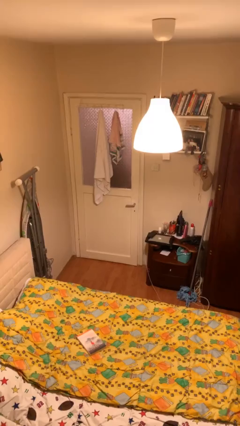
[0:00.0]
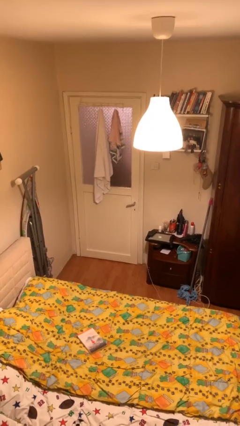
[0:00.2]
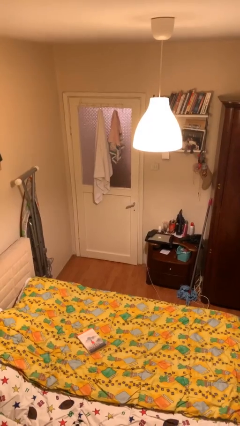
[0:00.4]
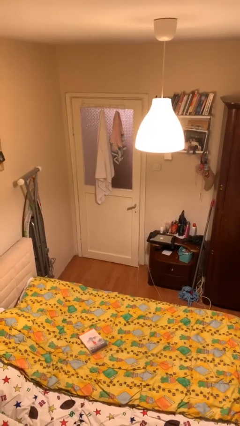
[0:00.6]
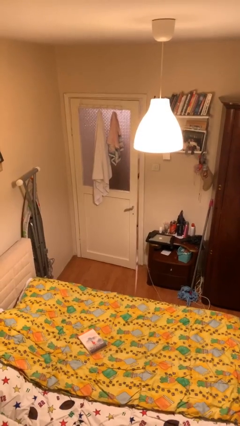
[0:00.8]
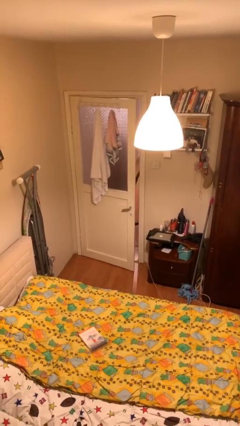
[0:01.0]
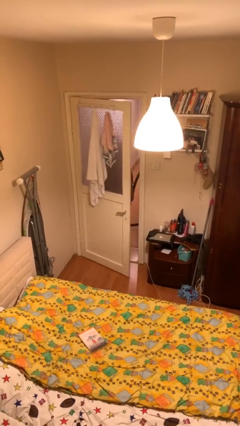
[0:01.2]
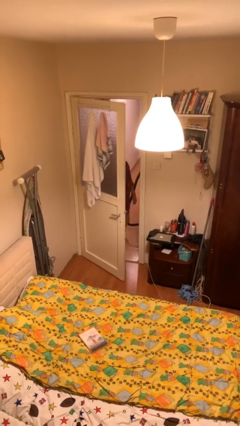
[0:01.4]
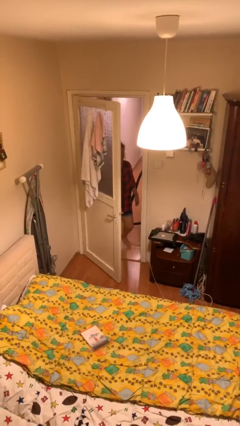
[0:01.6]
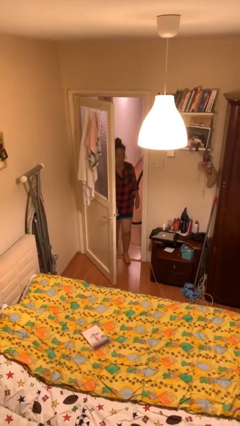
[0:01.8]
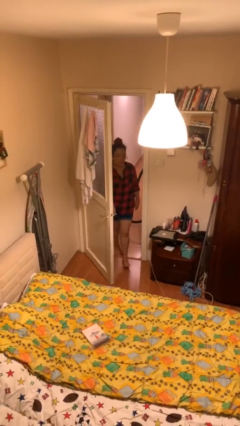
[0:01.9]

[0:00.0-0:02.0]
person opens facility door

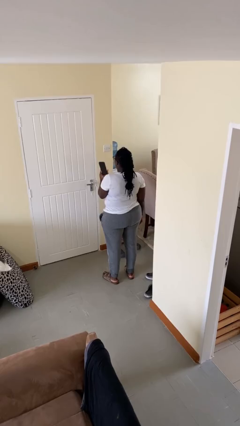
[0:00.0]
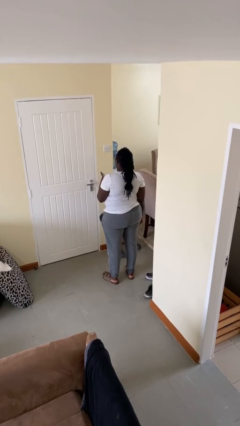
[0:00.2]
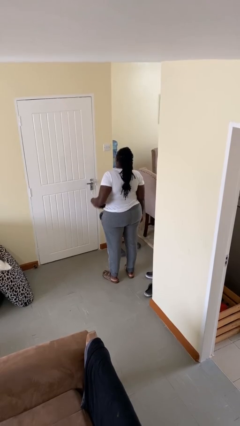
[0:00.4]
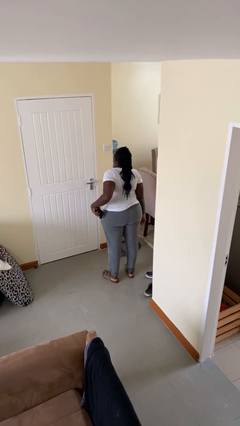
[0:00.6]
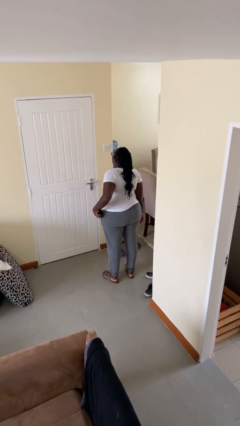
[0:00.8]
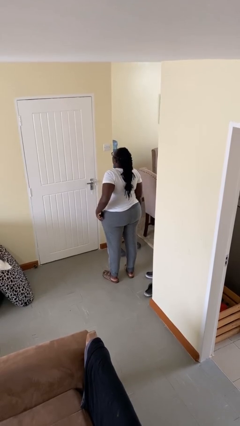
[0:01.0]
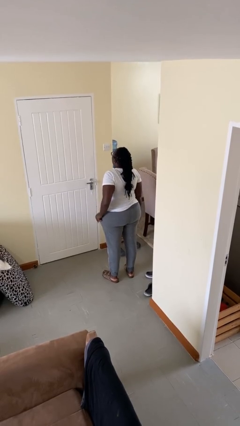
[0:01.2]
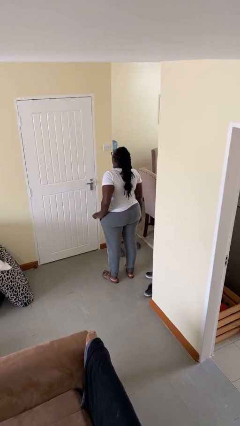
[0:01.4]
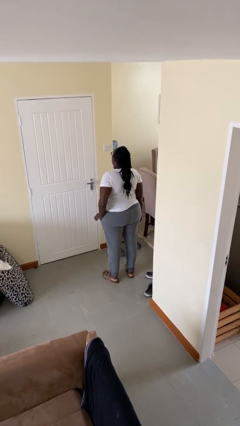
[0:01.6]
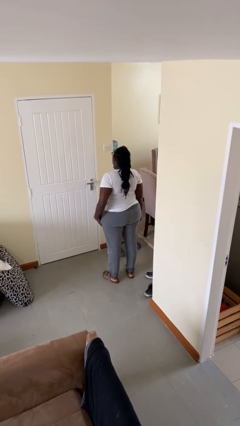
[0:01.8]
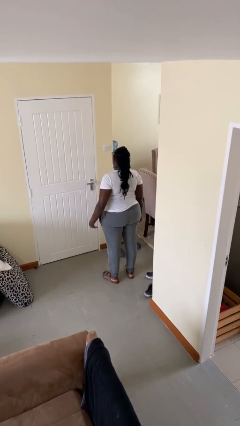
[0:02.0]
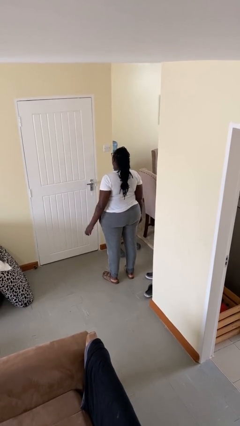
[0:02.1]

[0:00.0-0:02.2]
person puts phone into pocket

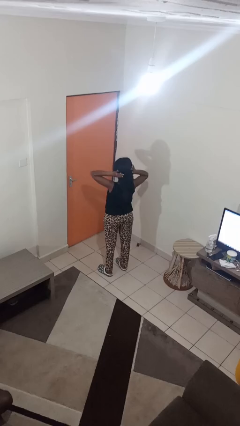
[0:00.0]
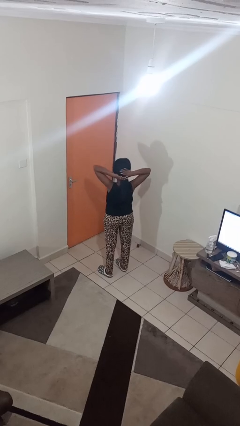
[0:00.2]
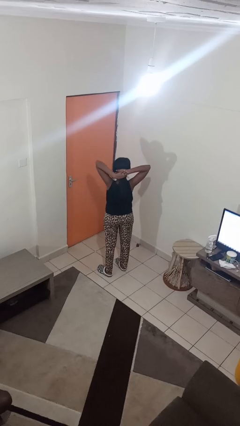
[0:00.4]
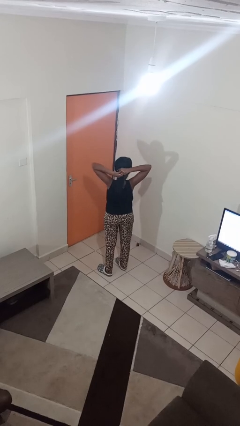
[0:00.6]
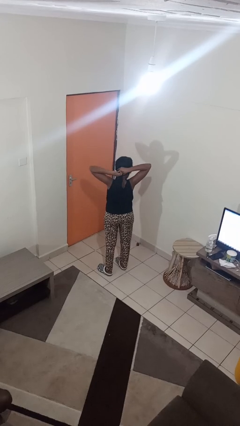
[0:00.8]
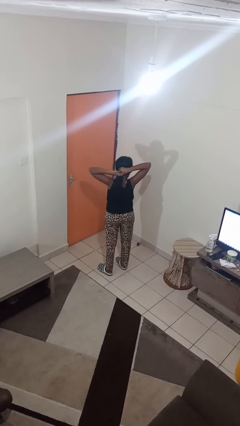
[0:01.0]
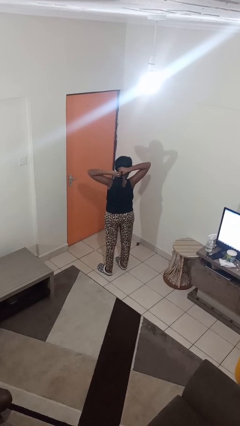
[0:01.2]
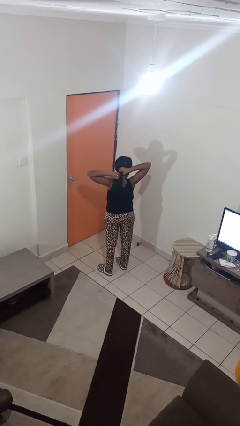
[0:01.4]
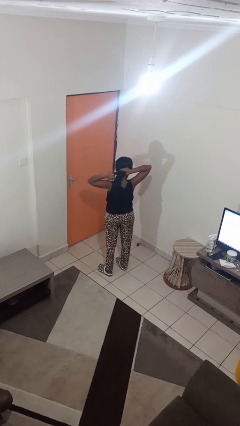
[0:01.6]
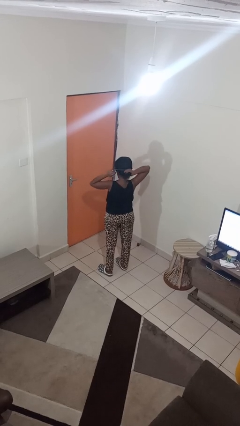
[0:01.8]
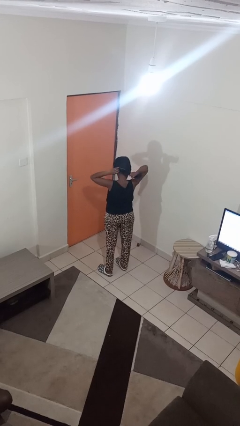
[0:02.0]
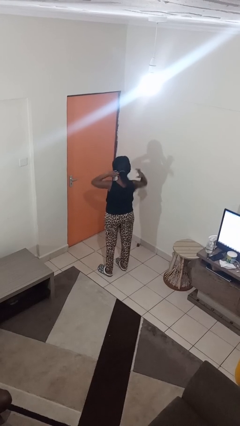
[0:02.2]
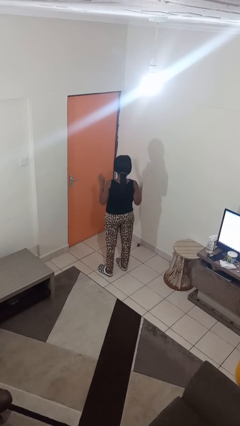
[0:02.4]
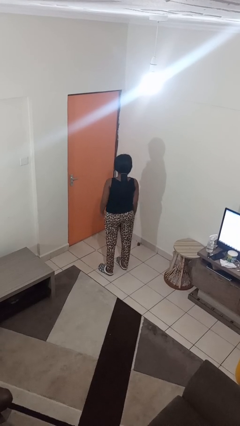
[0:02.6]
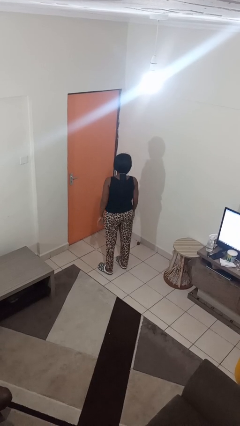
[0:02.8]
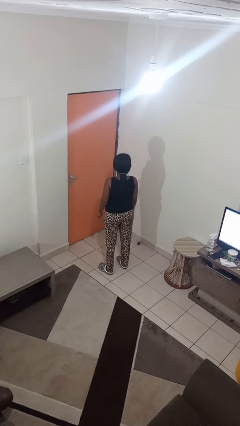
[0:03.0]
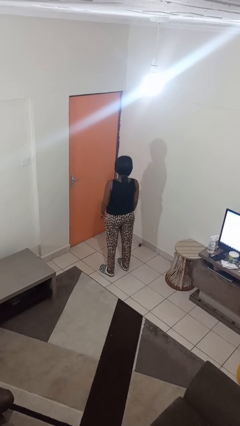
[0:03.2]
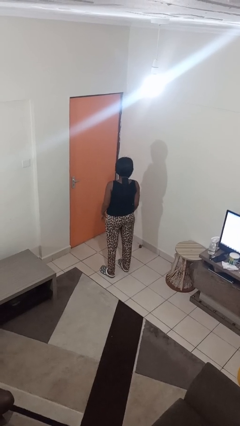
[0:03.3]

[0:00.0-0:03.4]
person puts hair in ponytail

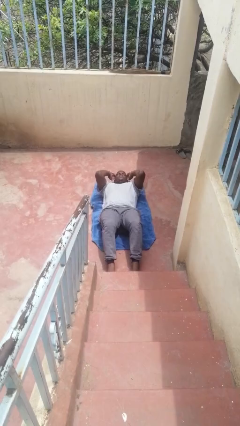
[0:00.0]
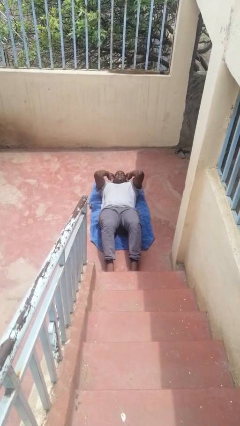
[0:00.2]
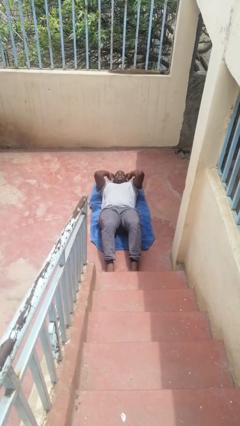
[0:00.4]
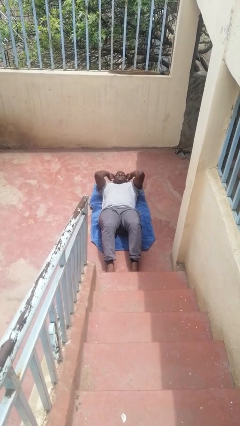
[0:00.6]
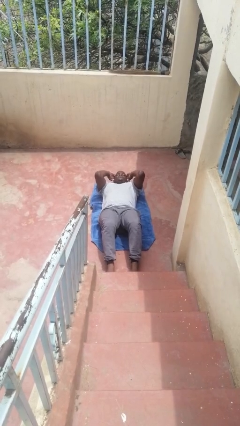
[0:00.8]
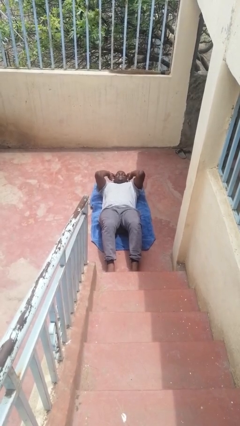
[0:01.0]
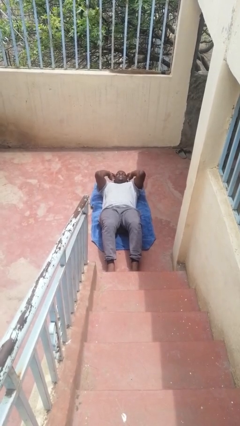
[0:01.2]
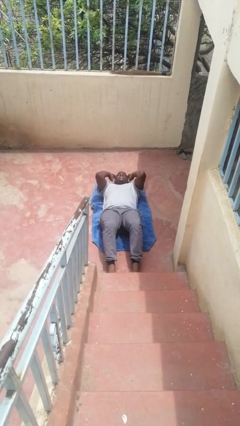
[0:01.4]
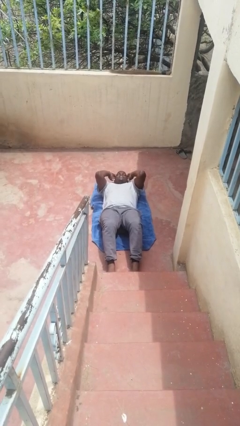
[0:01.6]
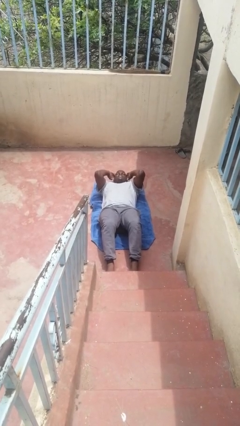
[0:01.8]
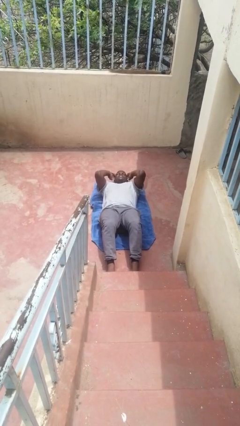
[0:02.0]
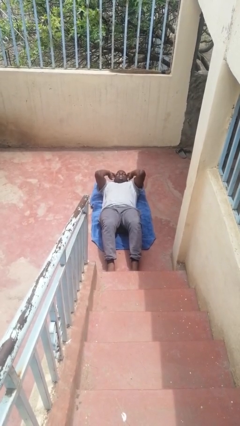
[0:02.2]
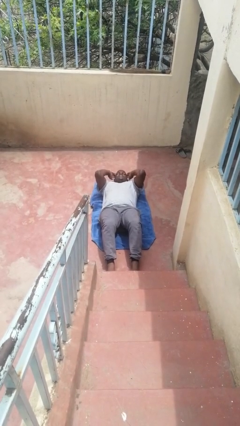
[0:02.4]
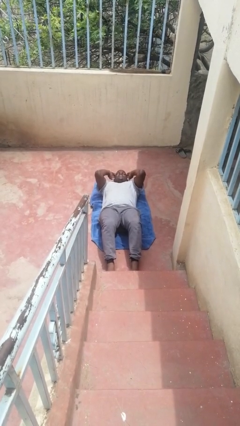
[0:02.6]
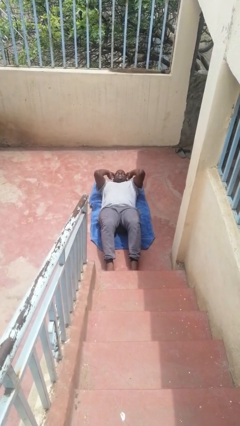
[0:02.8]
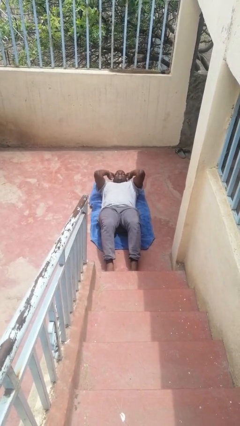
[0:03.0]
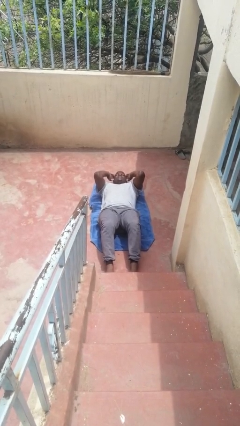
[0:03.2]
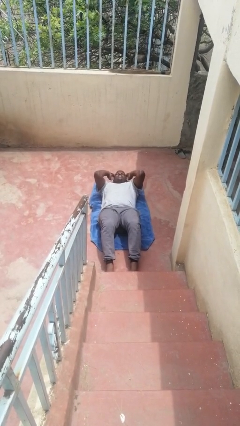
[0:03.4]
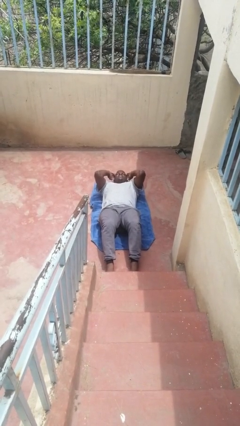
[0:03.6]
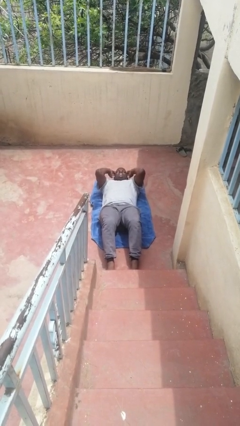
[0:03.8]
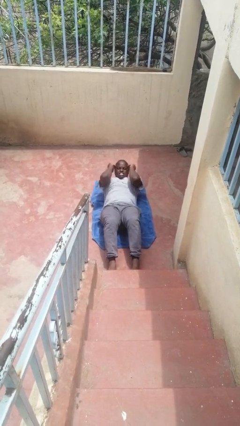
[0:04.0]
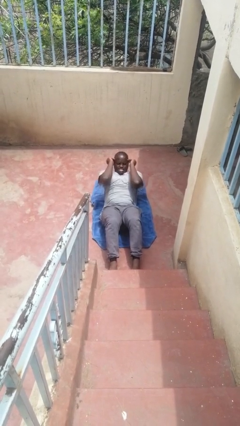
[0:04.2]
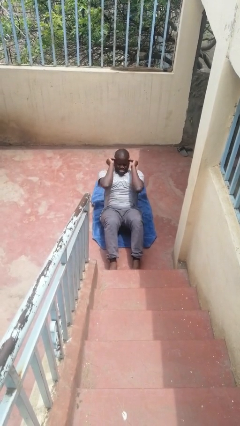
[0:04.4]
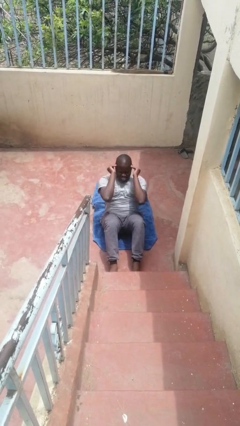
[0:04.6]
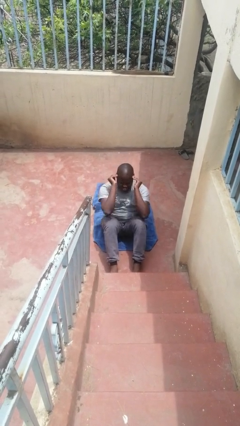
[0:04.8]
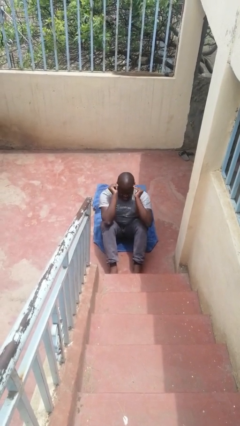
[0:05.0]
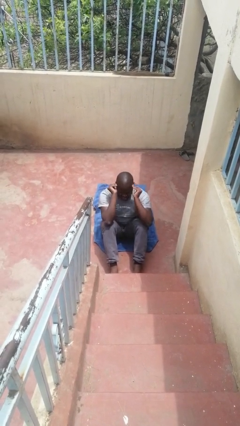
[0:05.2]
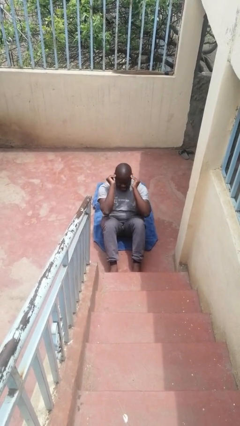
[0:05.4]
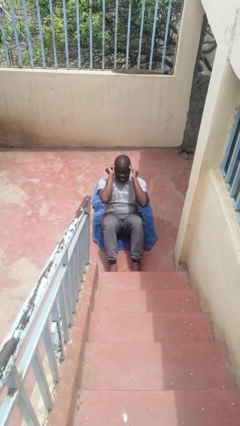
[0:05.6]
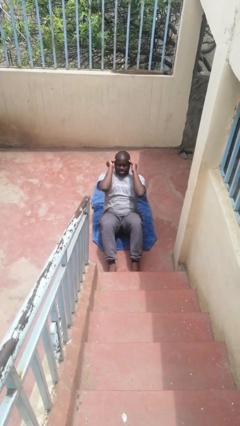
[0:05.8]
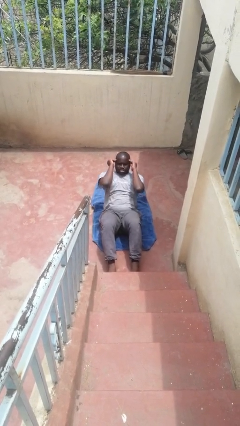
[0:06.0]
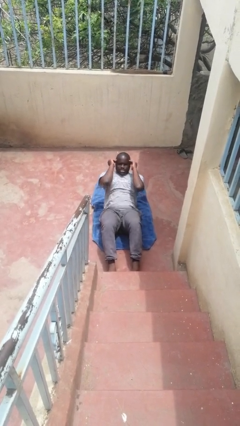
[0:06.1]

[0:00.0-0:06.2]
person exercises with situp
